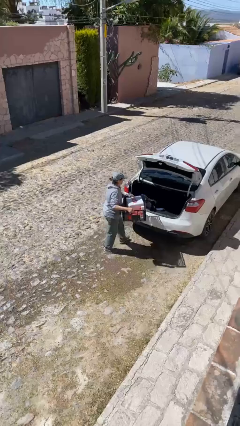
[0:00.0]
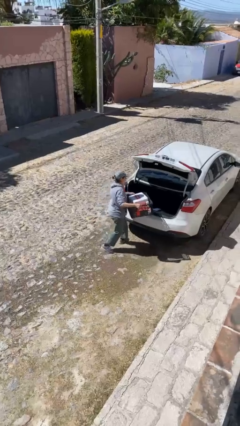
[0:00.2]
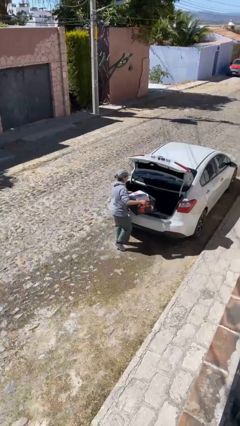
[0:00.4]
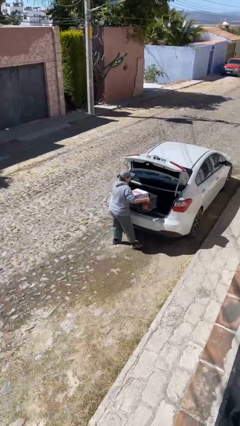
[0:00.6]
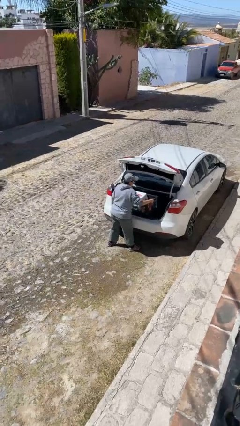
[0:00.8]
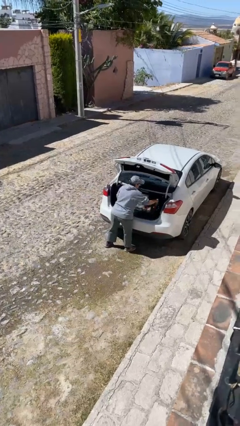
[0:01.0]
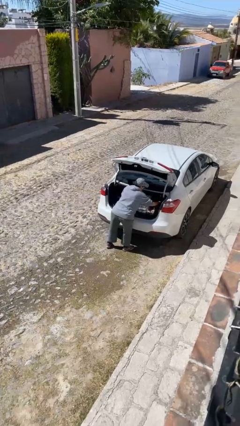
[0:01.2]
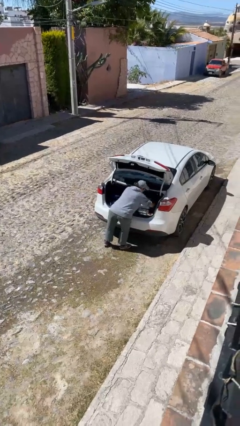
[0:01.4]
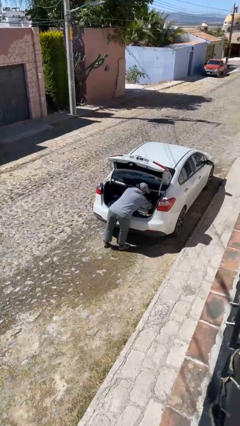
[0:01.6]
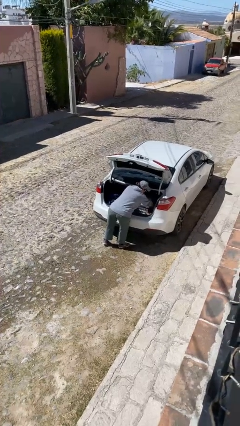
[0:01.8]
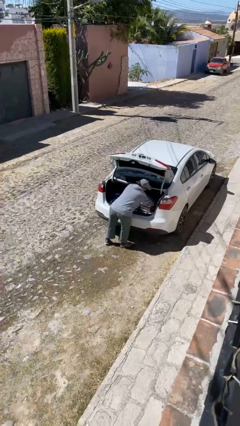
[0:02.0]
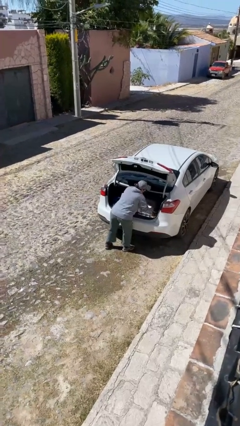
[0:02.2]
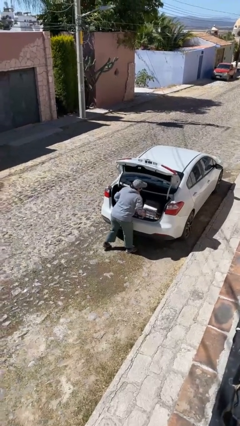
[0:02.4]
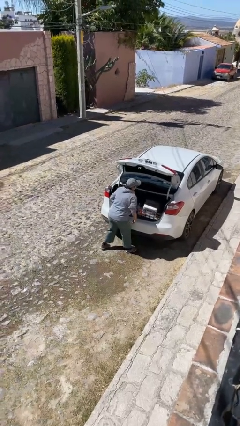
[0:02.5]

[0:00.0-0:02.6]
person loads car

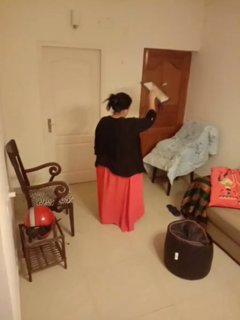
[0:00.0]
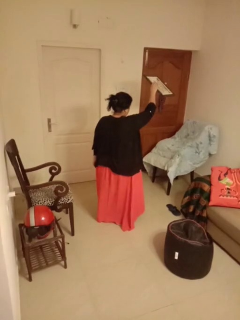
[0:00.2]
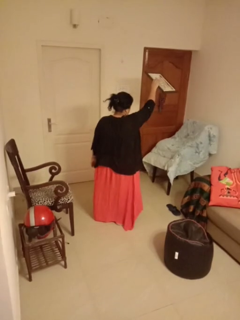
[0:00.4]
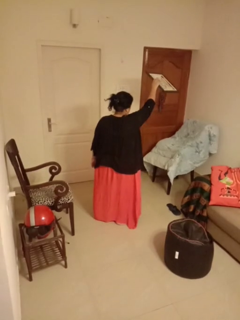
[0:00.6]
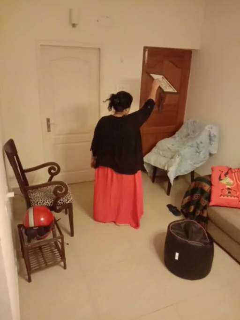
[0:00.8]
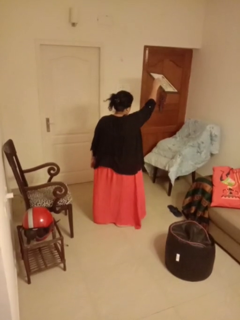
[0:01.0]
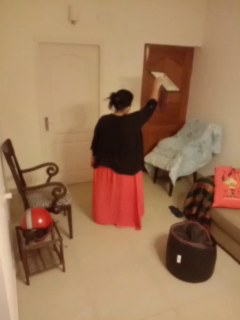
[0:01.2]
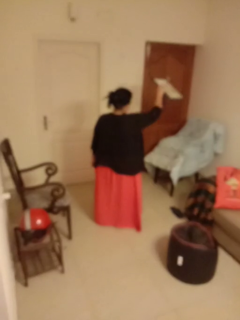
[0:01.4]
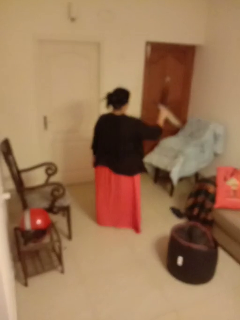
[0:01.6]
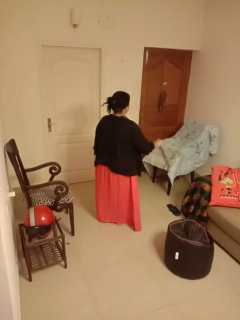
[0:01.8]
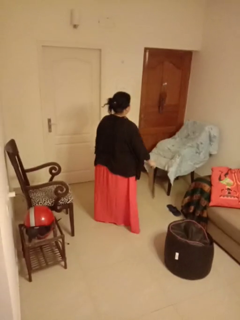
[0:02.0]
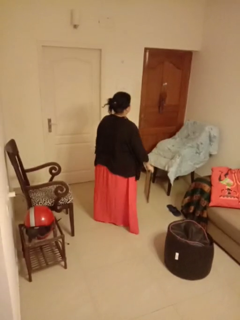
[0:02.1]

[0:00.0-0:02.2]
person holds object above head

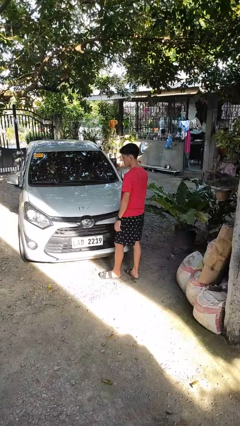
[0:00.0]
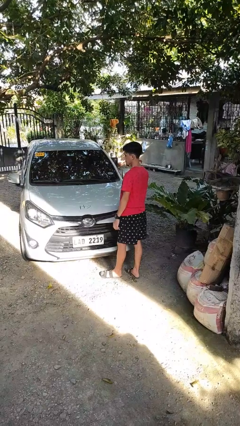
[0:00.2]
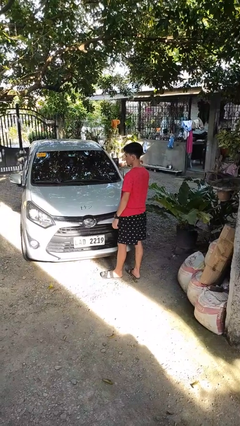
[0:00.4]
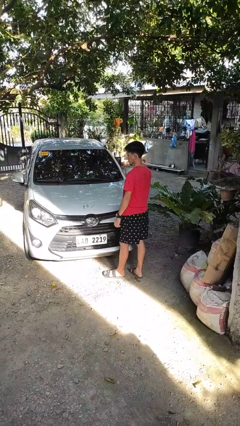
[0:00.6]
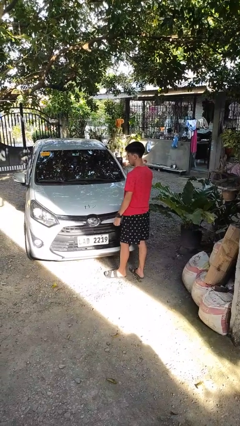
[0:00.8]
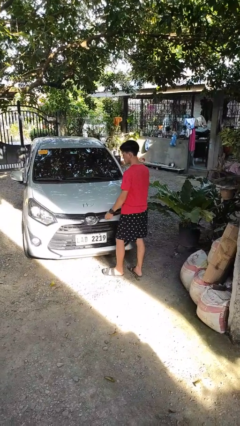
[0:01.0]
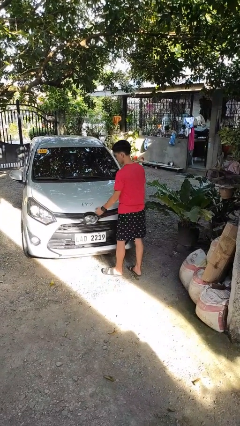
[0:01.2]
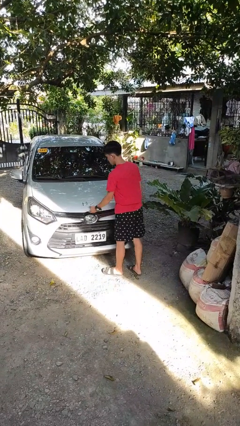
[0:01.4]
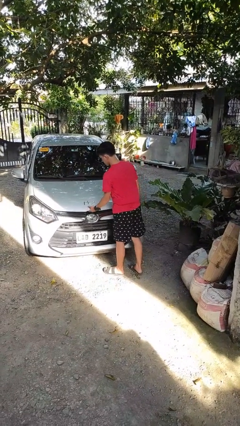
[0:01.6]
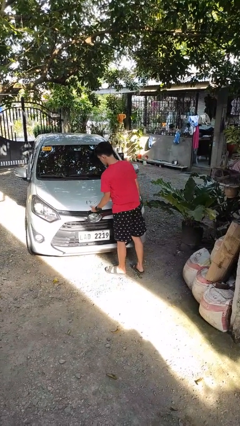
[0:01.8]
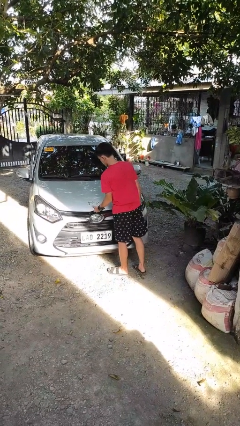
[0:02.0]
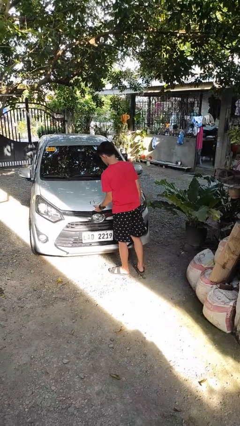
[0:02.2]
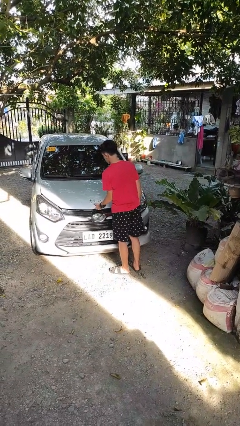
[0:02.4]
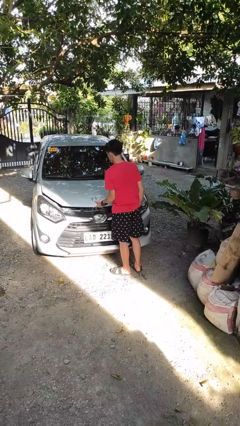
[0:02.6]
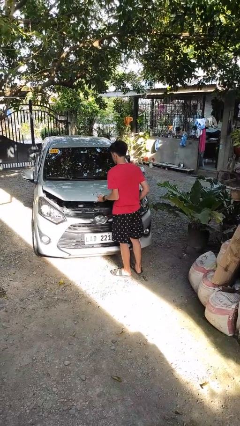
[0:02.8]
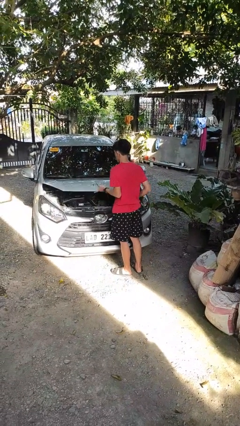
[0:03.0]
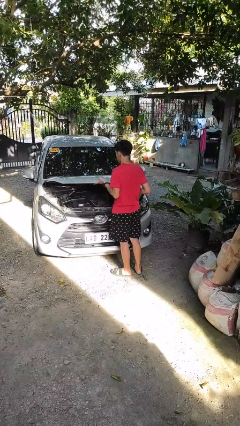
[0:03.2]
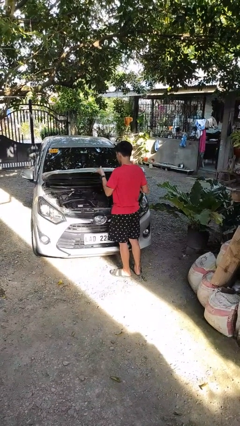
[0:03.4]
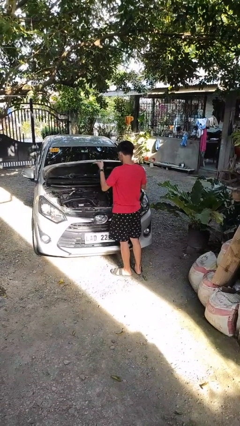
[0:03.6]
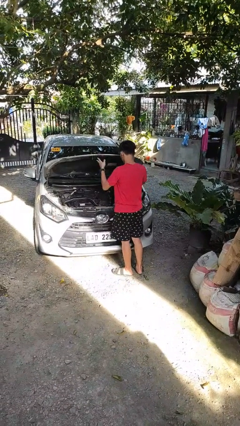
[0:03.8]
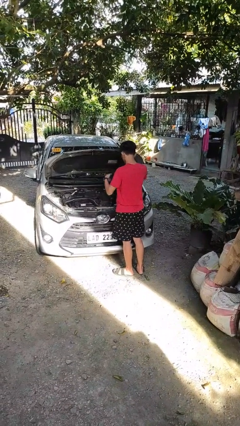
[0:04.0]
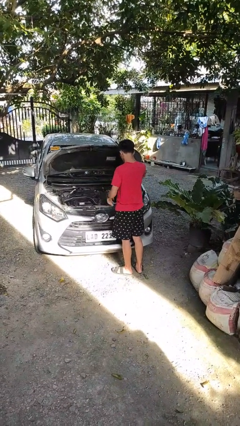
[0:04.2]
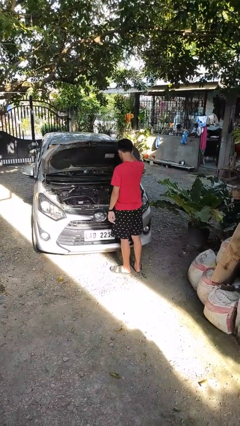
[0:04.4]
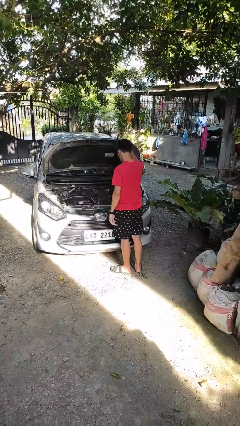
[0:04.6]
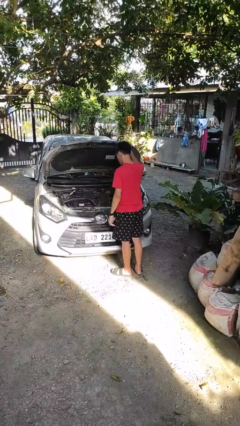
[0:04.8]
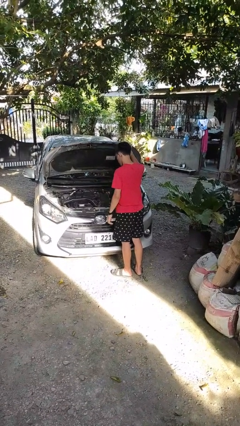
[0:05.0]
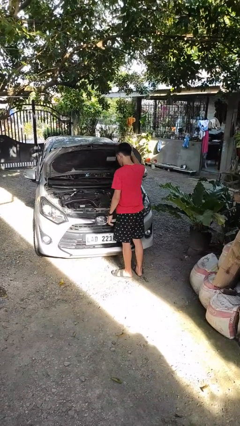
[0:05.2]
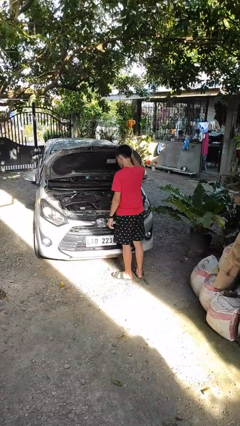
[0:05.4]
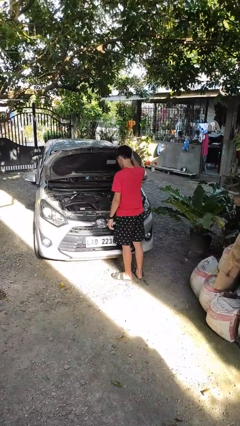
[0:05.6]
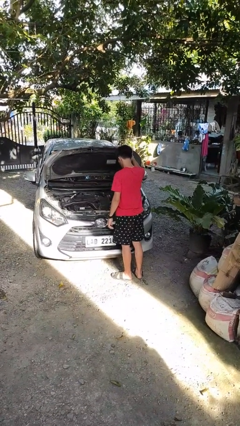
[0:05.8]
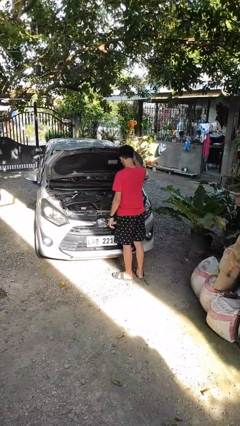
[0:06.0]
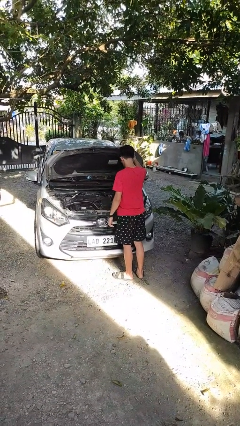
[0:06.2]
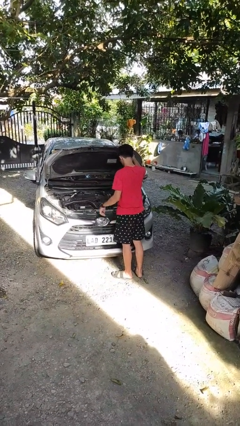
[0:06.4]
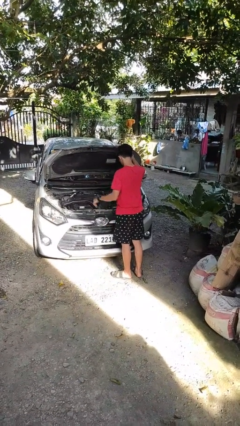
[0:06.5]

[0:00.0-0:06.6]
person opens car hood

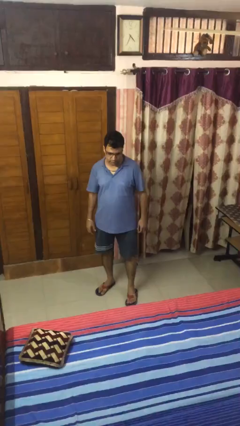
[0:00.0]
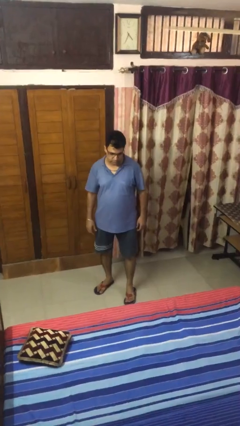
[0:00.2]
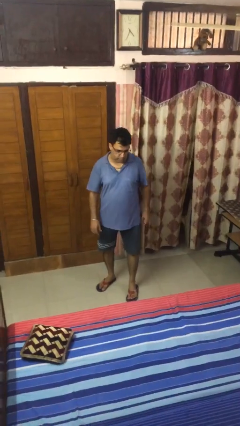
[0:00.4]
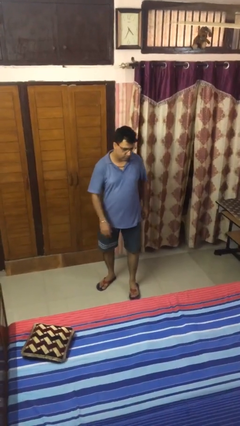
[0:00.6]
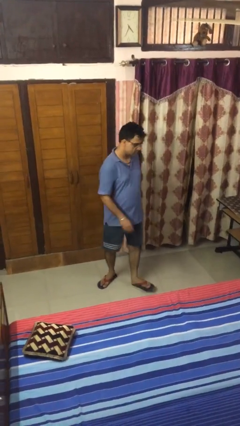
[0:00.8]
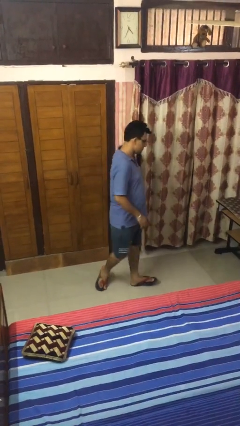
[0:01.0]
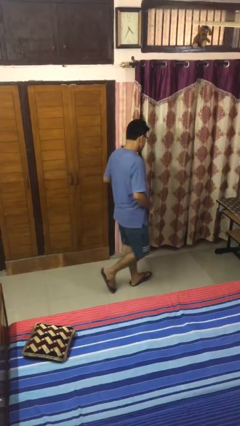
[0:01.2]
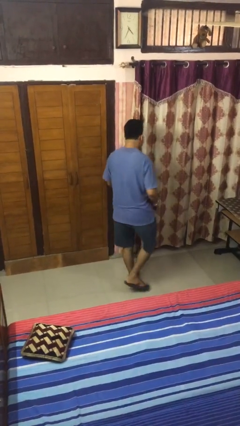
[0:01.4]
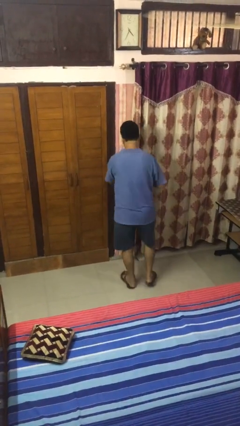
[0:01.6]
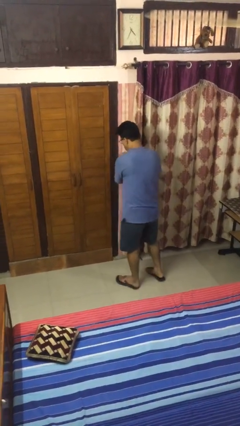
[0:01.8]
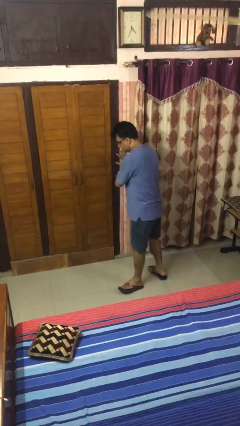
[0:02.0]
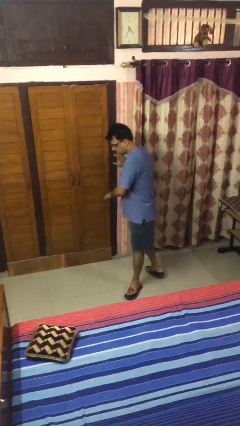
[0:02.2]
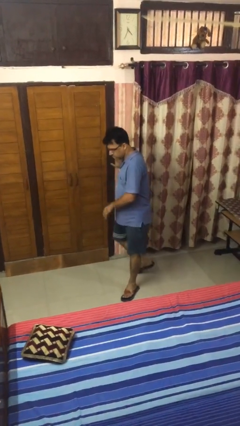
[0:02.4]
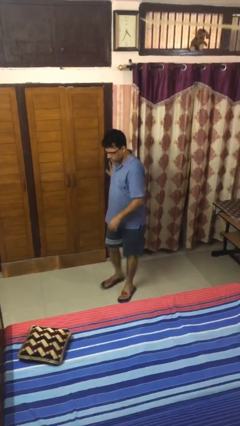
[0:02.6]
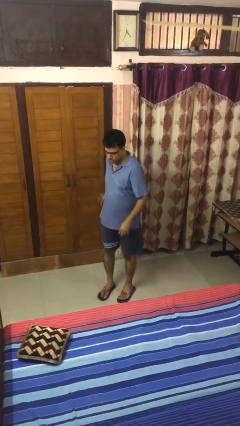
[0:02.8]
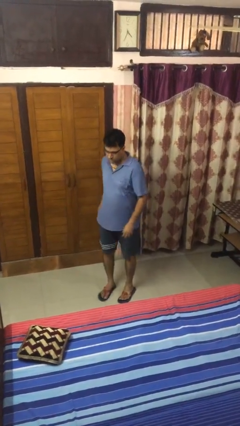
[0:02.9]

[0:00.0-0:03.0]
person twirls

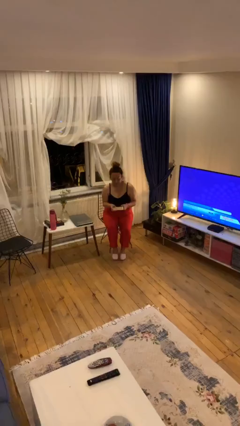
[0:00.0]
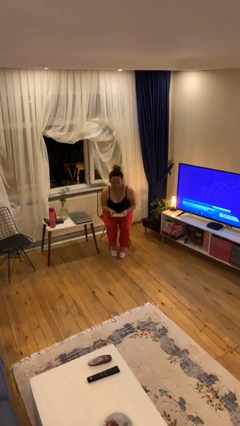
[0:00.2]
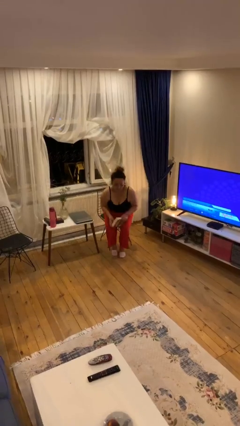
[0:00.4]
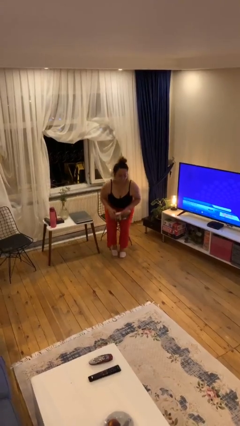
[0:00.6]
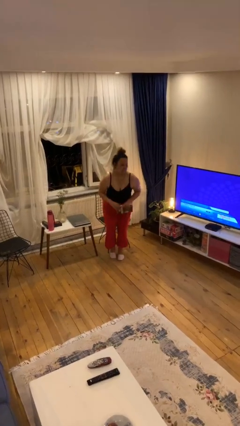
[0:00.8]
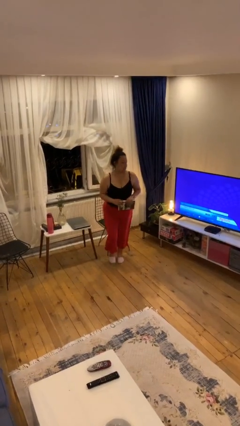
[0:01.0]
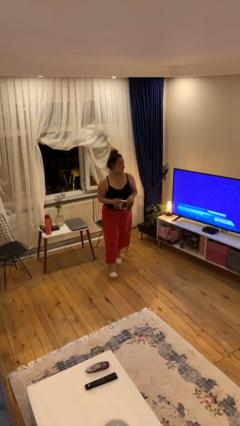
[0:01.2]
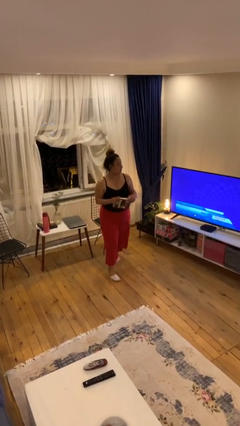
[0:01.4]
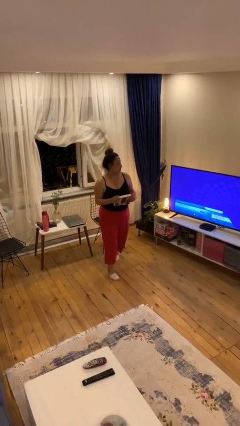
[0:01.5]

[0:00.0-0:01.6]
person stands up

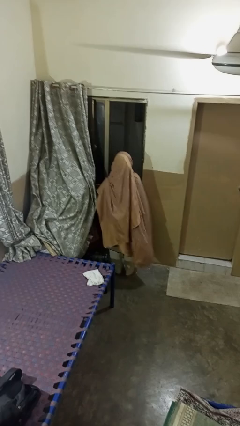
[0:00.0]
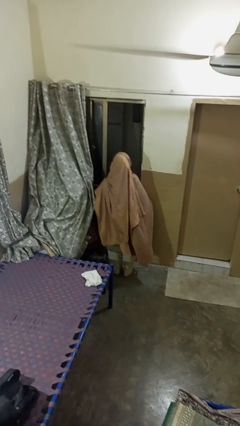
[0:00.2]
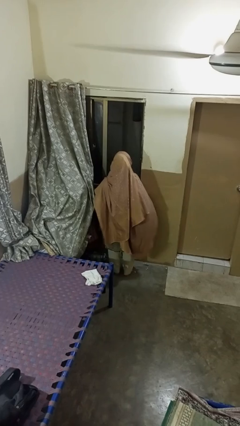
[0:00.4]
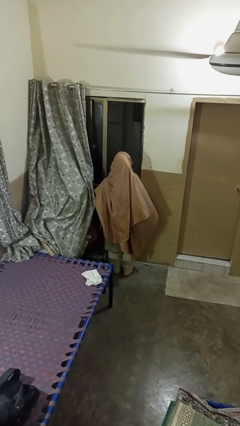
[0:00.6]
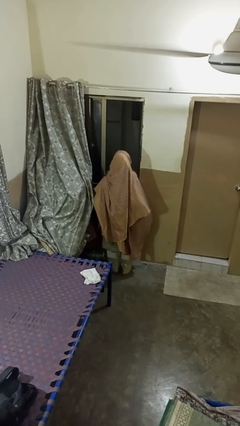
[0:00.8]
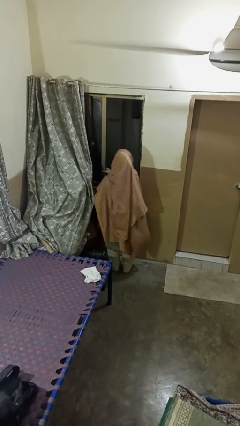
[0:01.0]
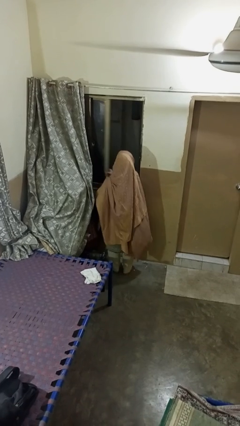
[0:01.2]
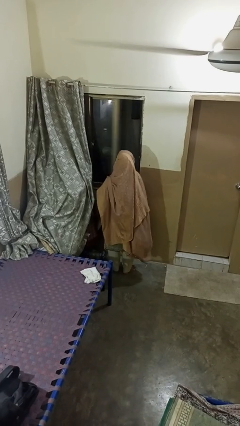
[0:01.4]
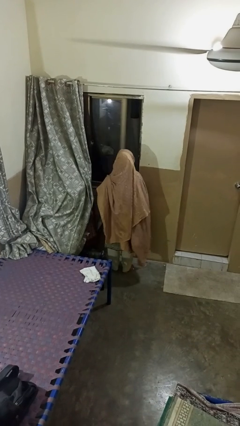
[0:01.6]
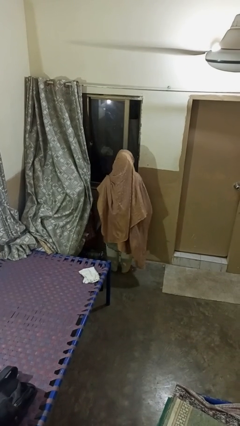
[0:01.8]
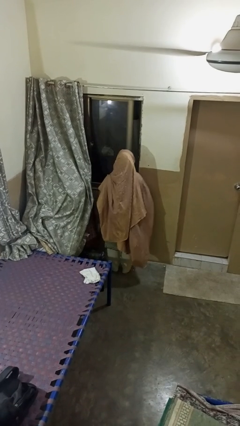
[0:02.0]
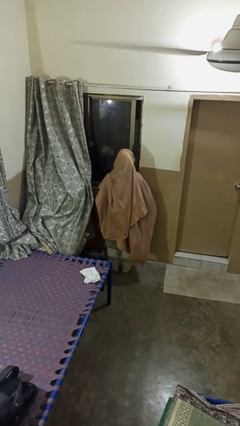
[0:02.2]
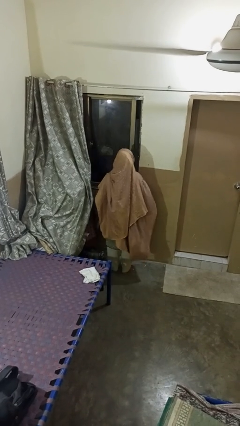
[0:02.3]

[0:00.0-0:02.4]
person closes home window
